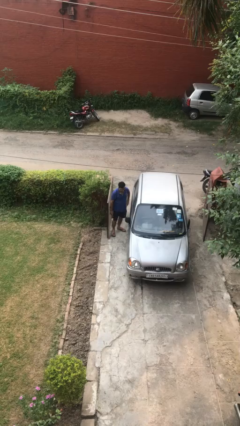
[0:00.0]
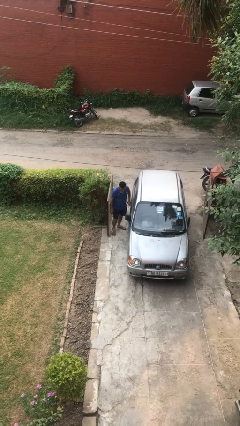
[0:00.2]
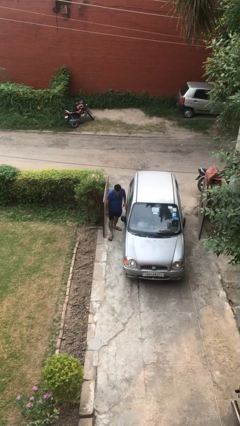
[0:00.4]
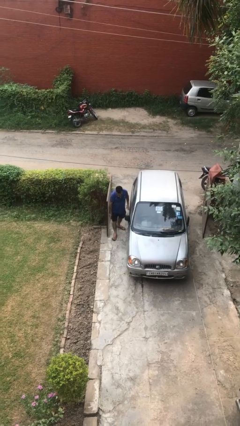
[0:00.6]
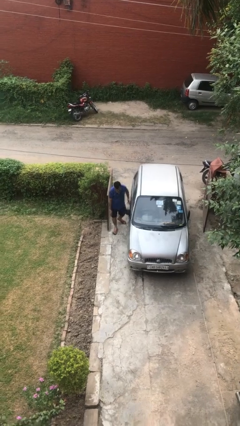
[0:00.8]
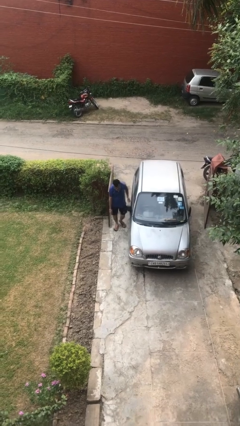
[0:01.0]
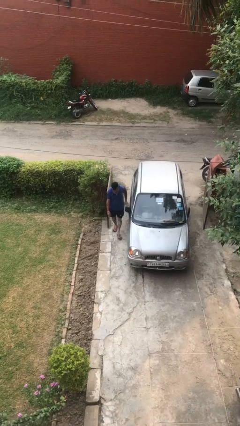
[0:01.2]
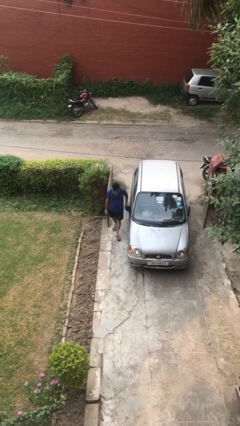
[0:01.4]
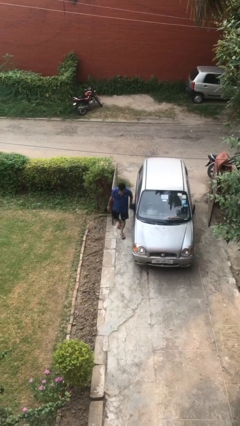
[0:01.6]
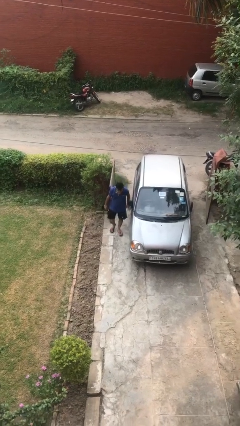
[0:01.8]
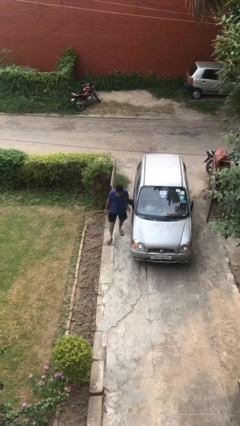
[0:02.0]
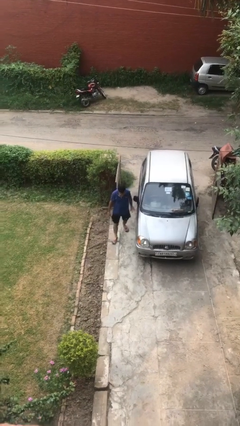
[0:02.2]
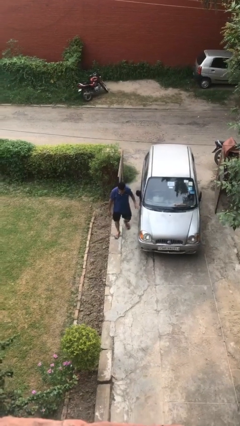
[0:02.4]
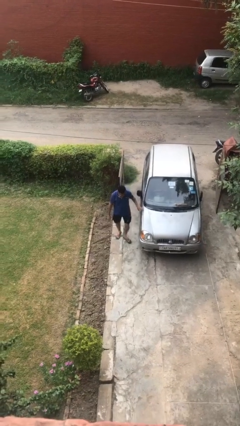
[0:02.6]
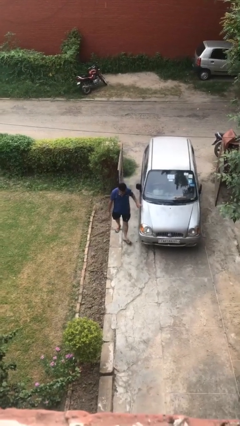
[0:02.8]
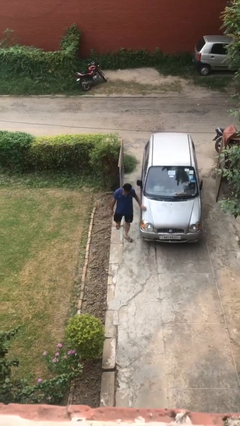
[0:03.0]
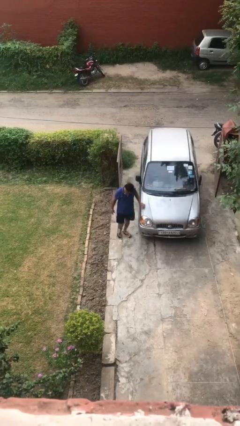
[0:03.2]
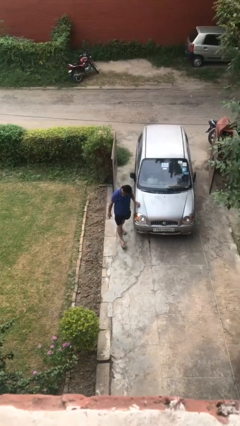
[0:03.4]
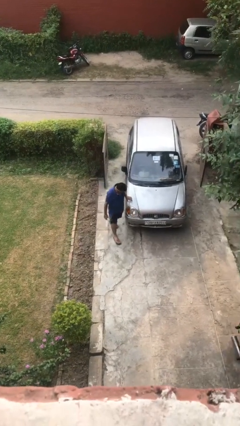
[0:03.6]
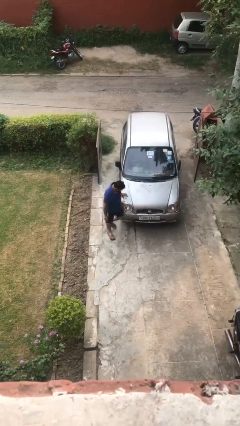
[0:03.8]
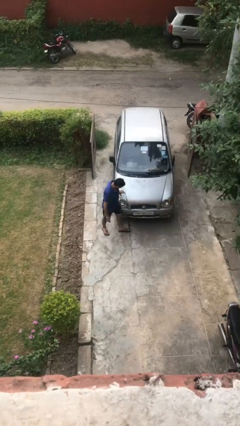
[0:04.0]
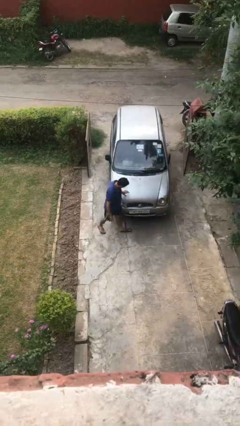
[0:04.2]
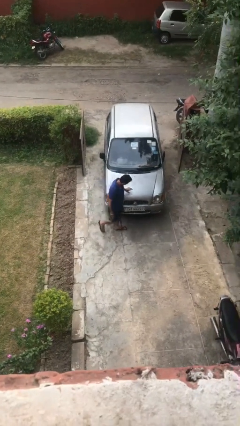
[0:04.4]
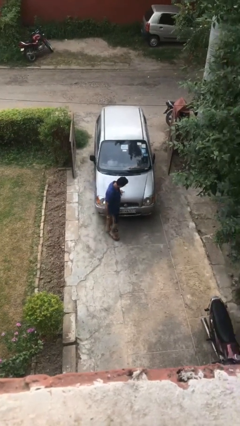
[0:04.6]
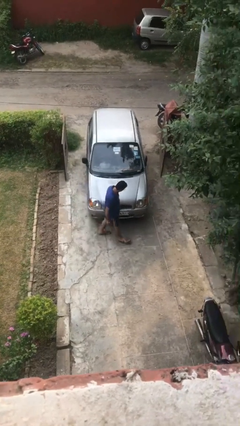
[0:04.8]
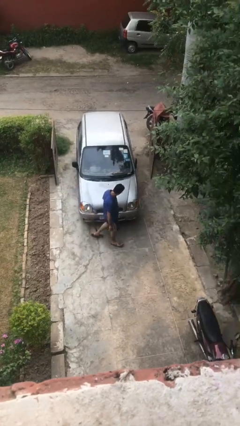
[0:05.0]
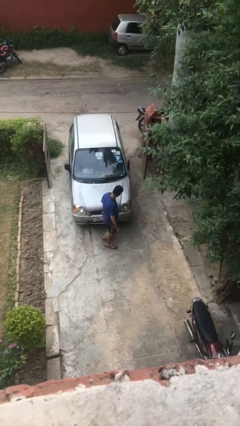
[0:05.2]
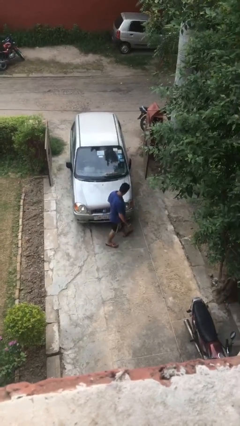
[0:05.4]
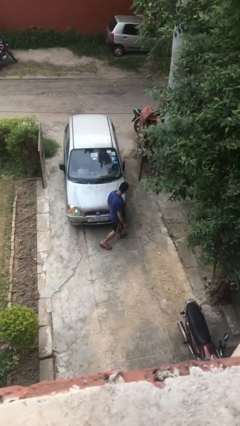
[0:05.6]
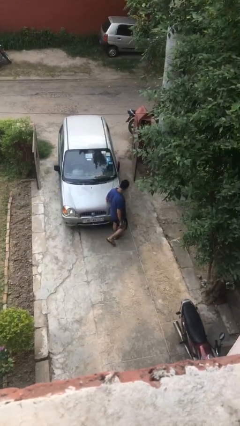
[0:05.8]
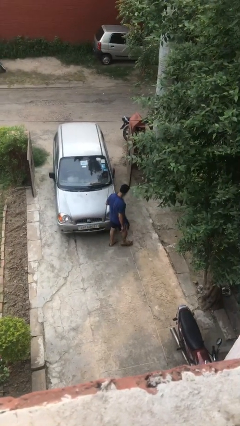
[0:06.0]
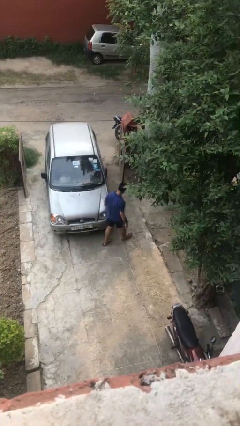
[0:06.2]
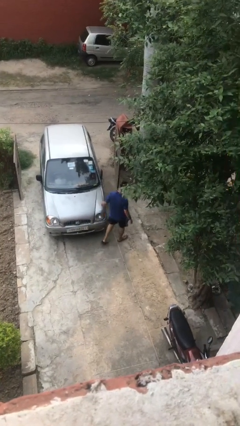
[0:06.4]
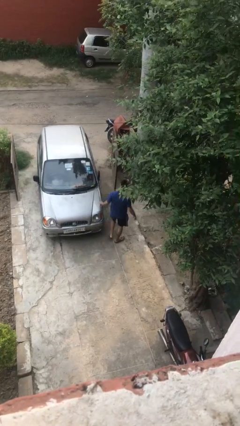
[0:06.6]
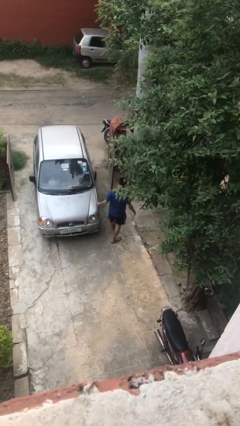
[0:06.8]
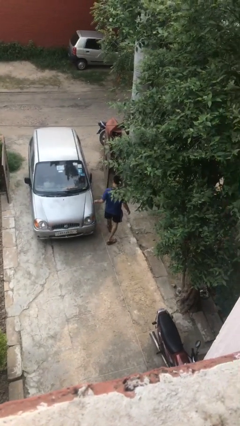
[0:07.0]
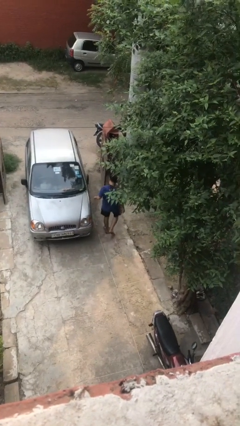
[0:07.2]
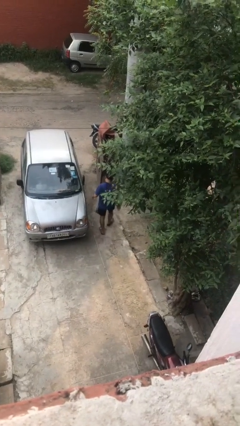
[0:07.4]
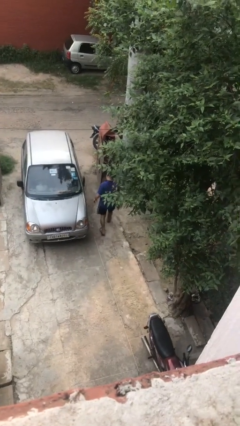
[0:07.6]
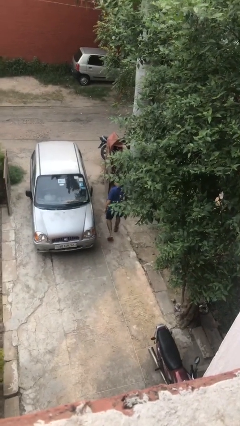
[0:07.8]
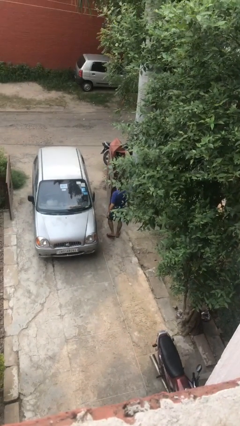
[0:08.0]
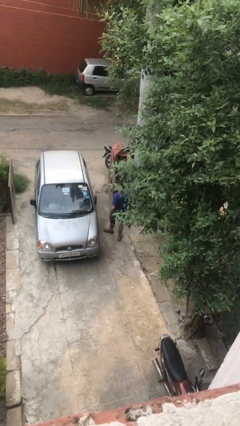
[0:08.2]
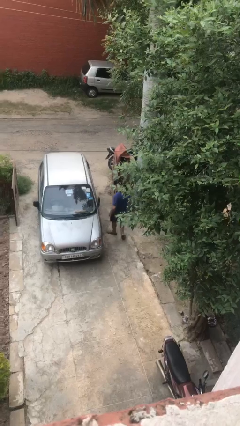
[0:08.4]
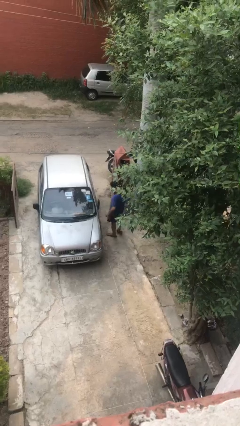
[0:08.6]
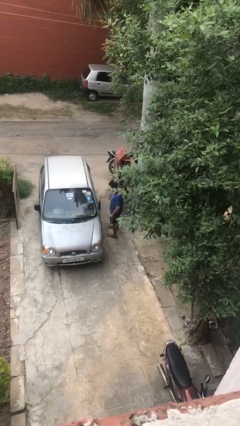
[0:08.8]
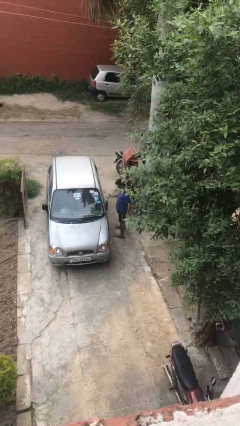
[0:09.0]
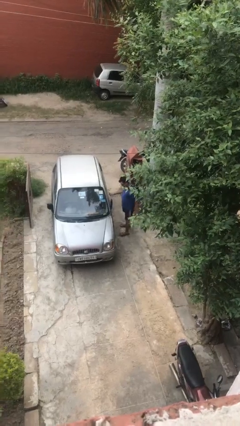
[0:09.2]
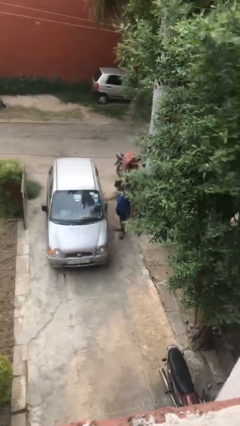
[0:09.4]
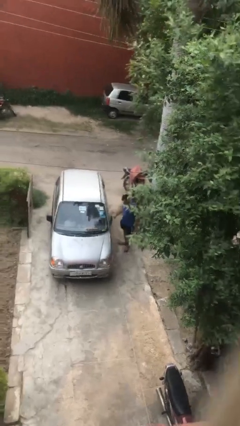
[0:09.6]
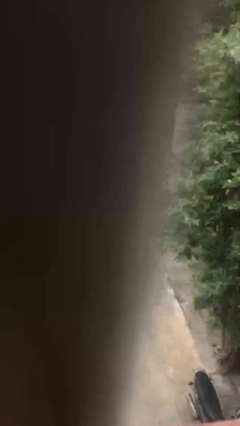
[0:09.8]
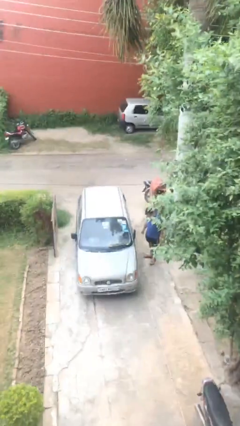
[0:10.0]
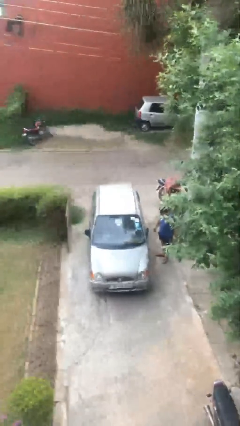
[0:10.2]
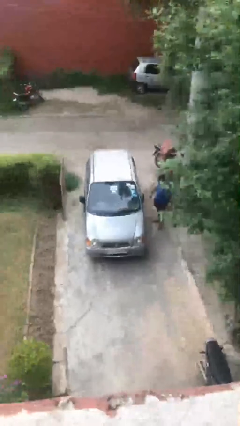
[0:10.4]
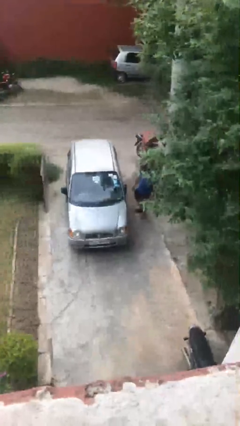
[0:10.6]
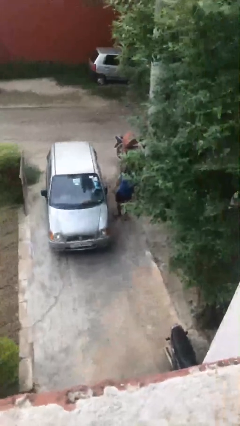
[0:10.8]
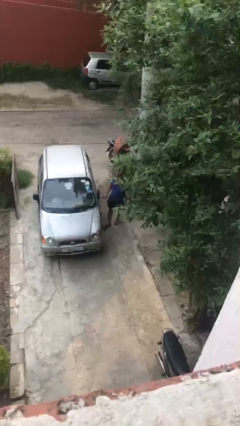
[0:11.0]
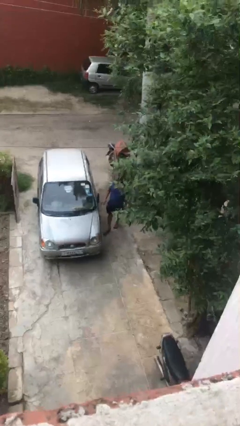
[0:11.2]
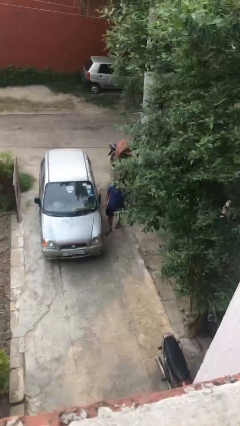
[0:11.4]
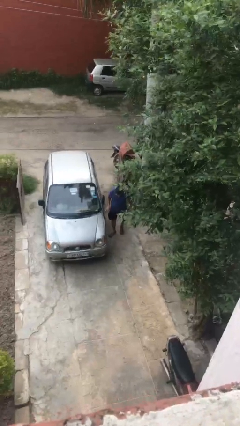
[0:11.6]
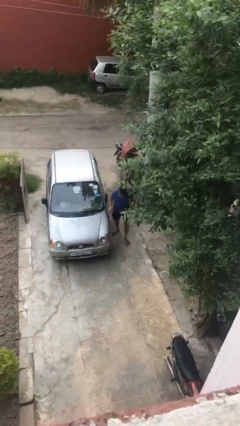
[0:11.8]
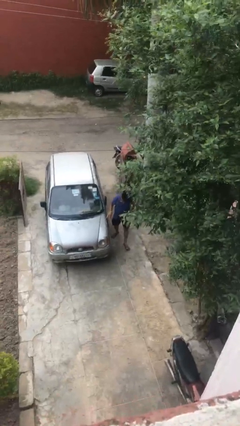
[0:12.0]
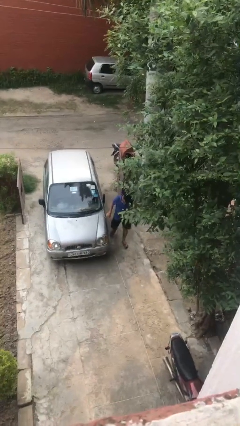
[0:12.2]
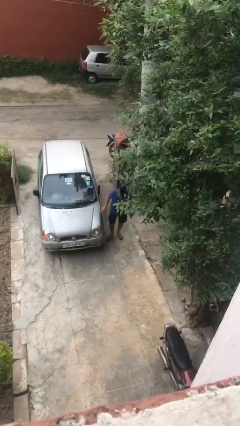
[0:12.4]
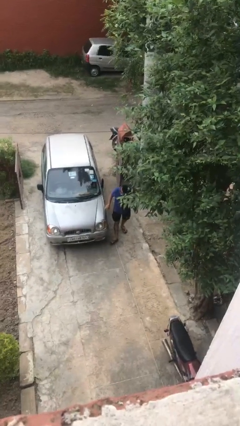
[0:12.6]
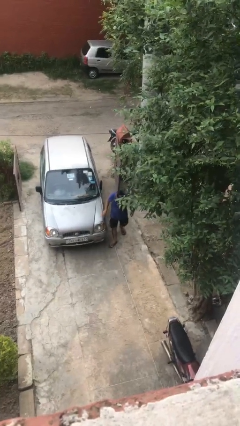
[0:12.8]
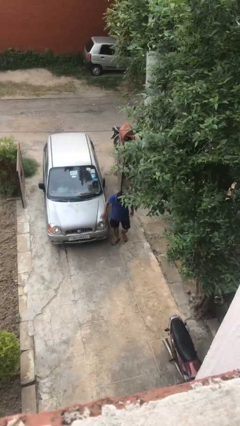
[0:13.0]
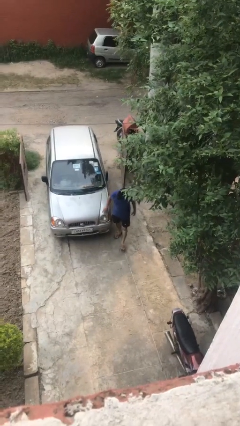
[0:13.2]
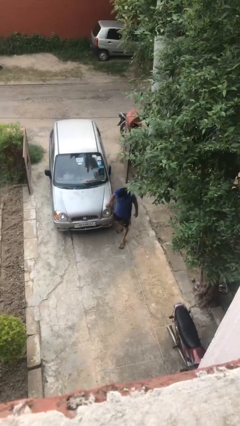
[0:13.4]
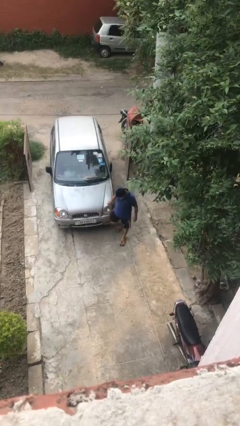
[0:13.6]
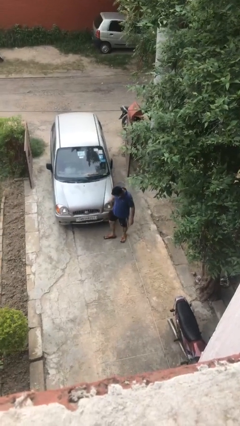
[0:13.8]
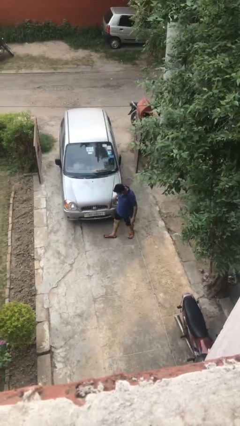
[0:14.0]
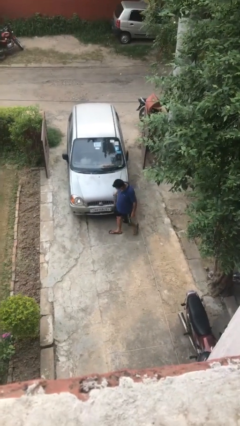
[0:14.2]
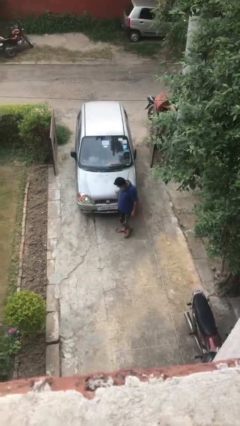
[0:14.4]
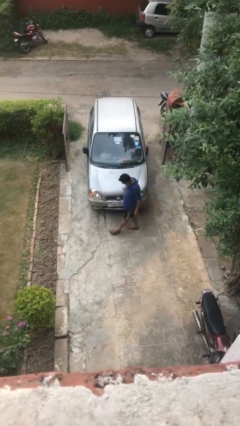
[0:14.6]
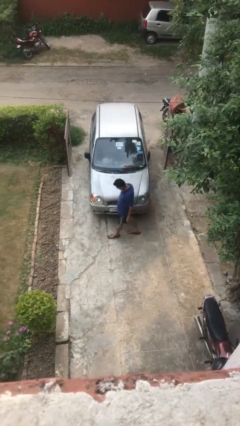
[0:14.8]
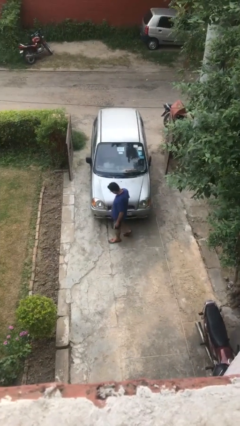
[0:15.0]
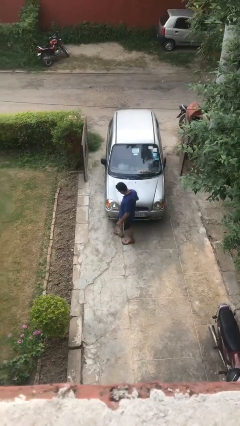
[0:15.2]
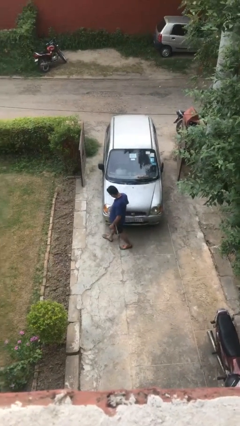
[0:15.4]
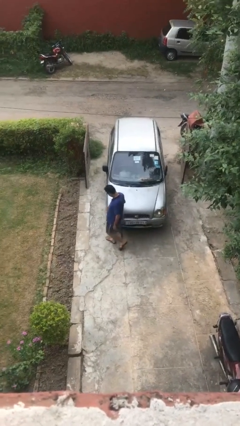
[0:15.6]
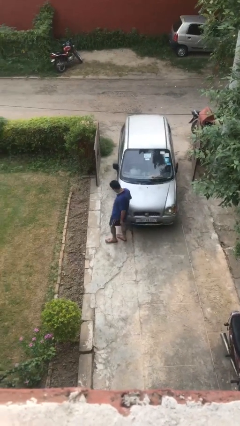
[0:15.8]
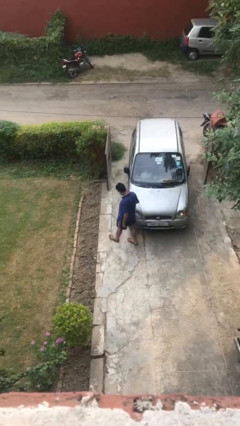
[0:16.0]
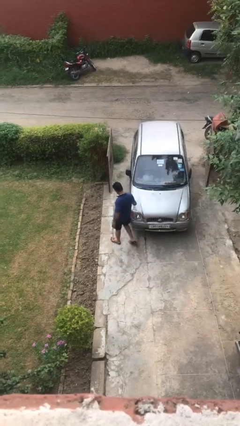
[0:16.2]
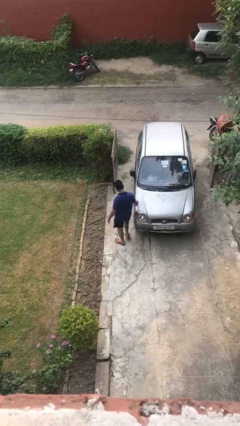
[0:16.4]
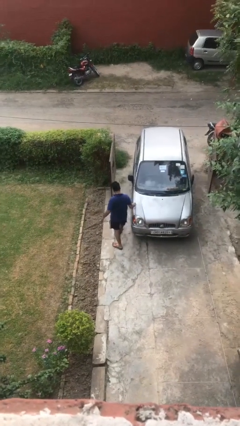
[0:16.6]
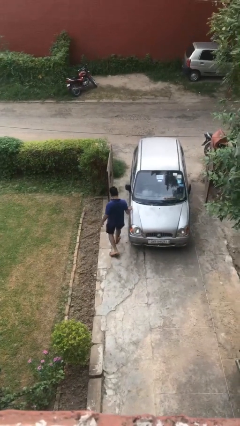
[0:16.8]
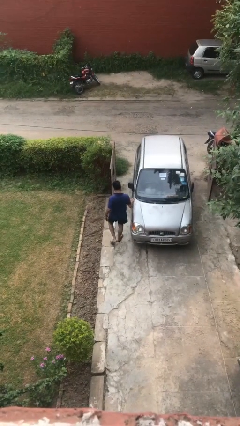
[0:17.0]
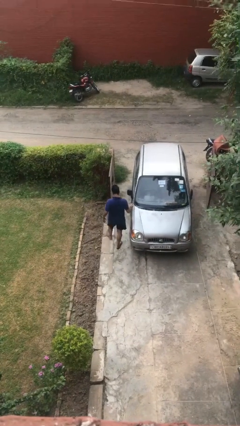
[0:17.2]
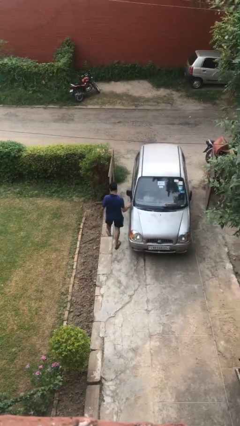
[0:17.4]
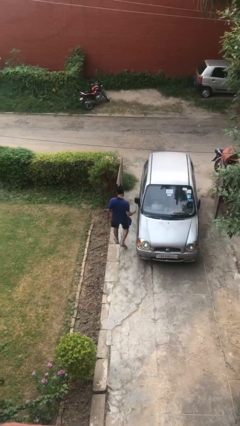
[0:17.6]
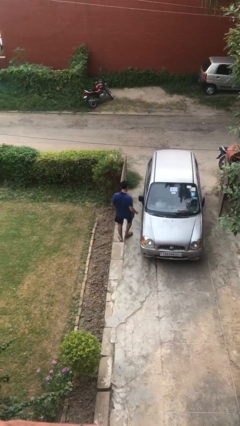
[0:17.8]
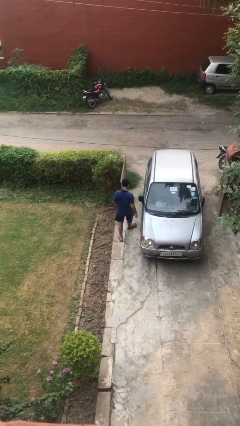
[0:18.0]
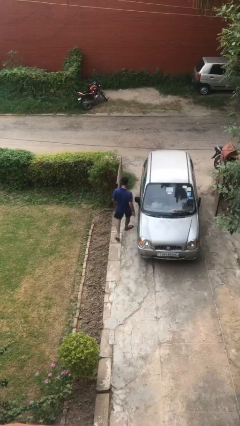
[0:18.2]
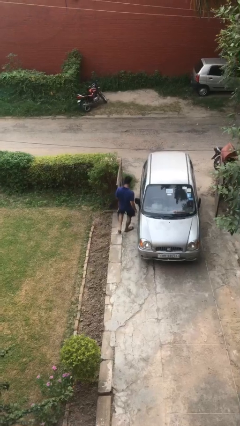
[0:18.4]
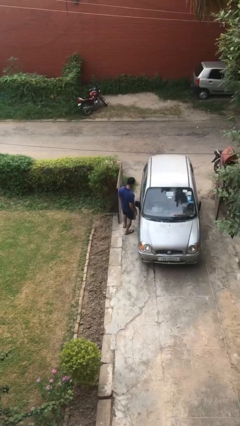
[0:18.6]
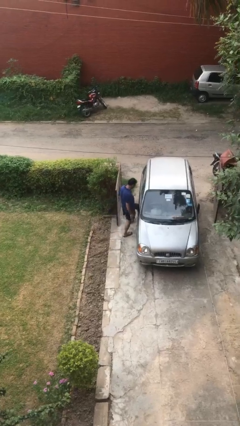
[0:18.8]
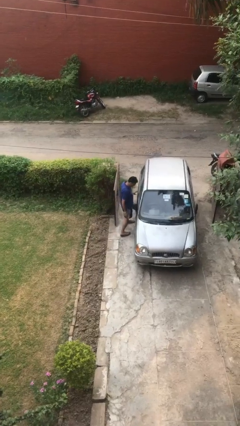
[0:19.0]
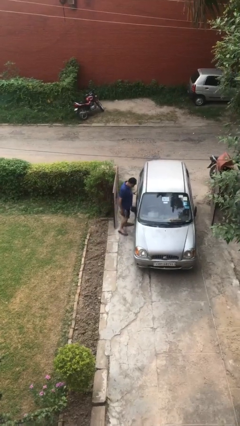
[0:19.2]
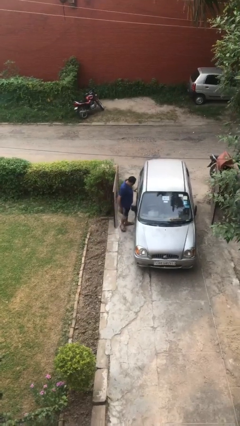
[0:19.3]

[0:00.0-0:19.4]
person walks around car
